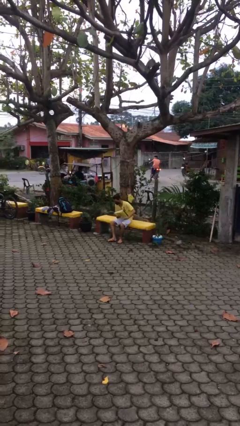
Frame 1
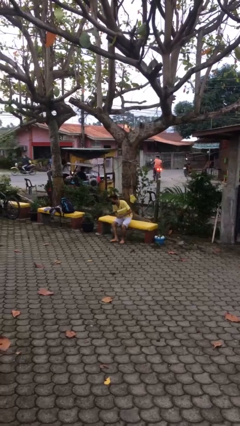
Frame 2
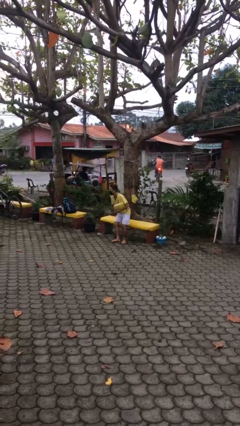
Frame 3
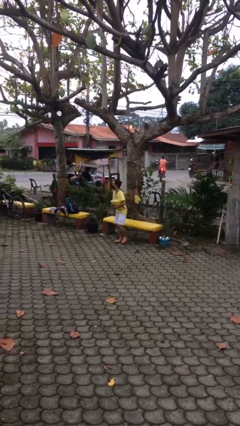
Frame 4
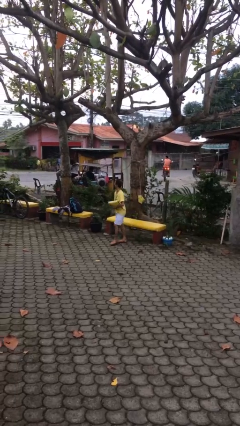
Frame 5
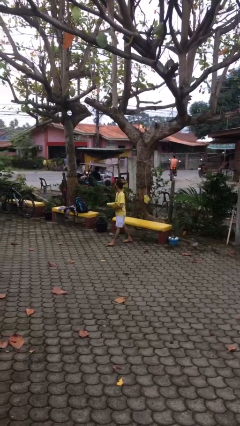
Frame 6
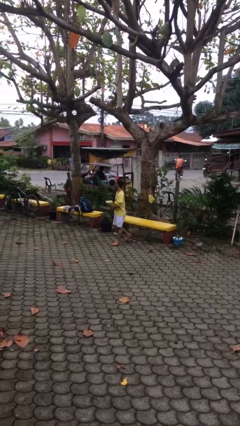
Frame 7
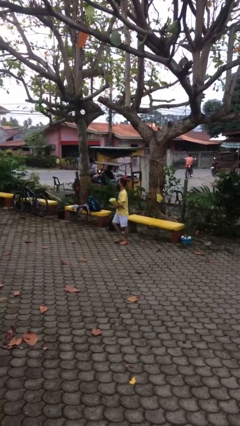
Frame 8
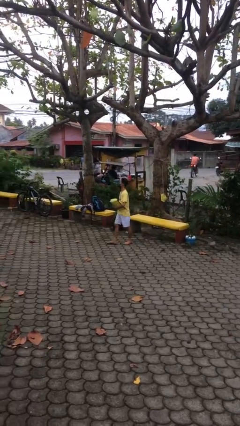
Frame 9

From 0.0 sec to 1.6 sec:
person stands up

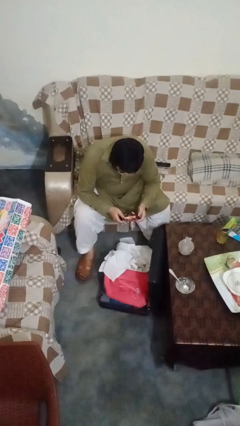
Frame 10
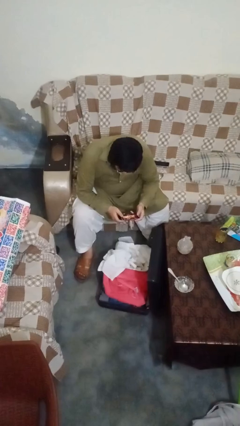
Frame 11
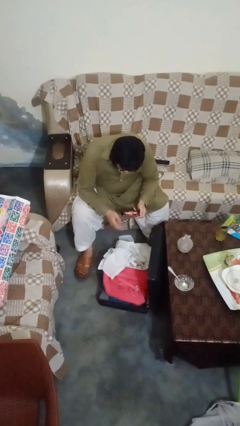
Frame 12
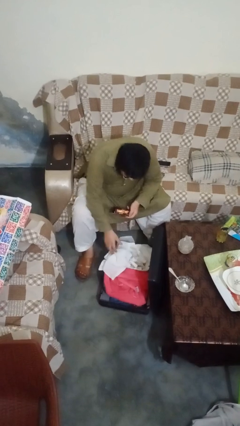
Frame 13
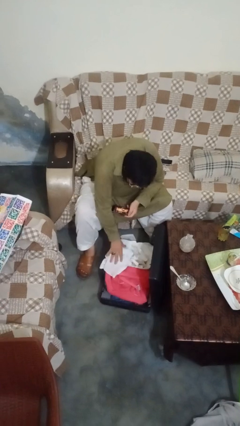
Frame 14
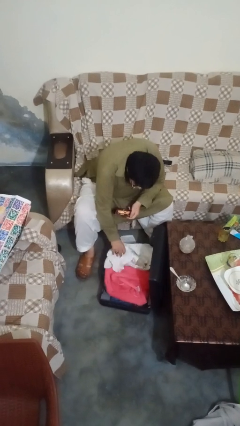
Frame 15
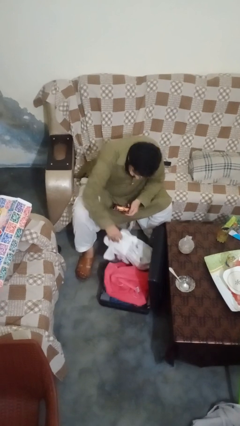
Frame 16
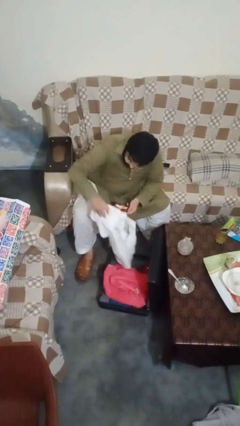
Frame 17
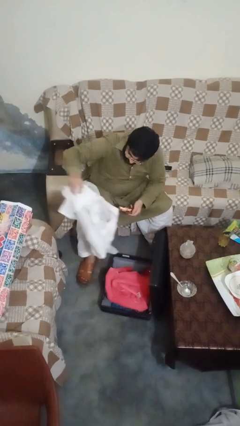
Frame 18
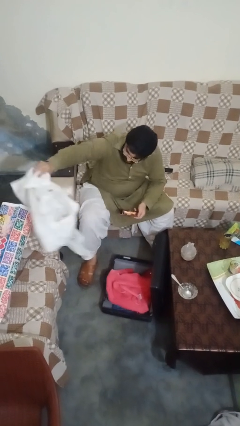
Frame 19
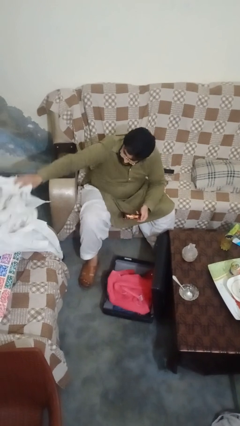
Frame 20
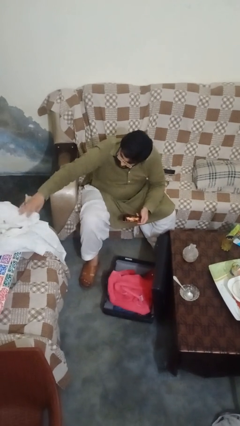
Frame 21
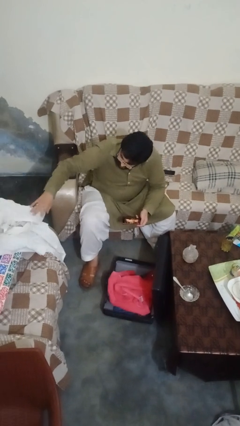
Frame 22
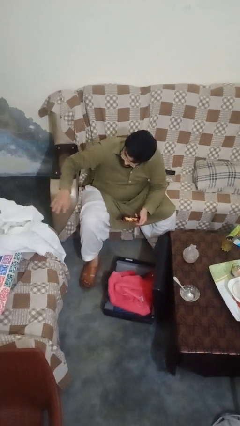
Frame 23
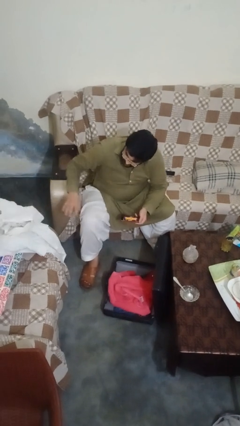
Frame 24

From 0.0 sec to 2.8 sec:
person unloads clothes from suitcase

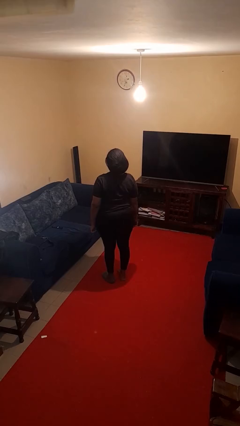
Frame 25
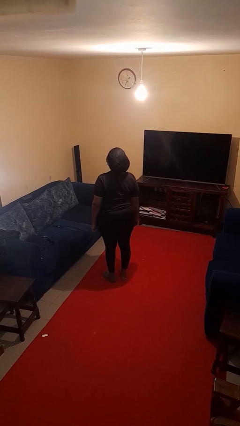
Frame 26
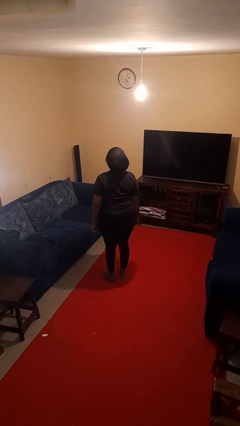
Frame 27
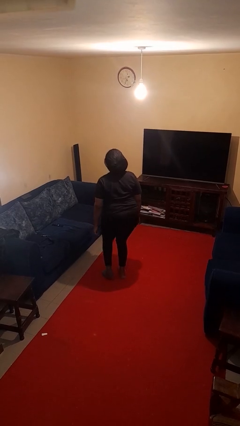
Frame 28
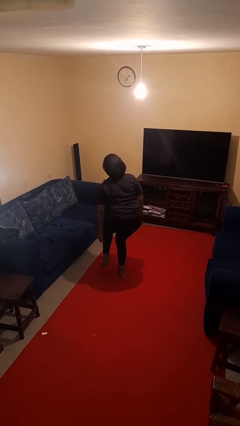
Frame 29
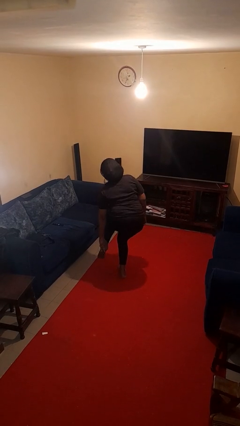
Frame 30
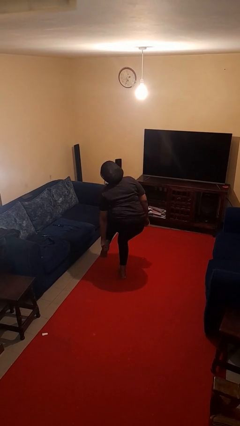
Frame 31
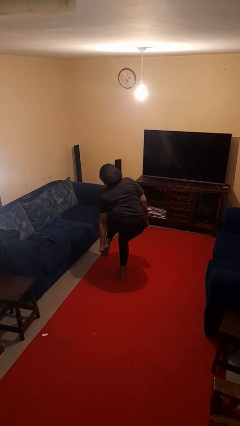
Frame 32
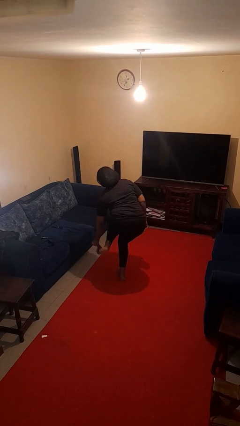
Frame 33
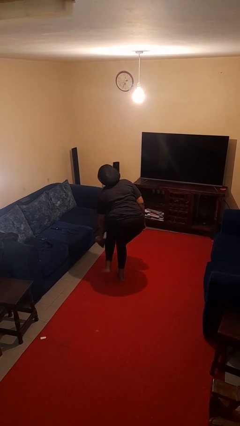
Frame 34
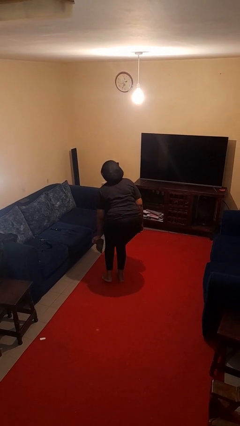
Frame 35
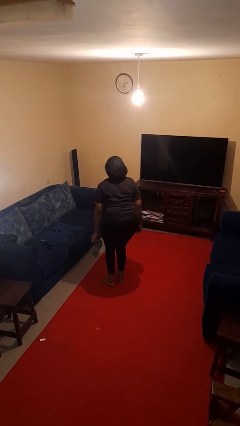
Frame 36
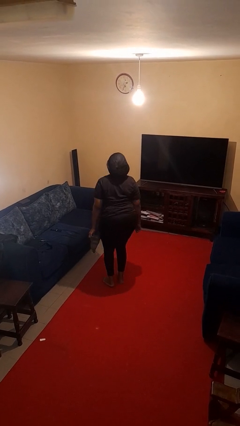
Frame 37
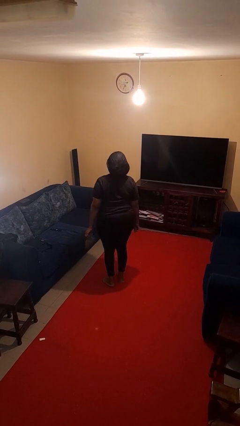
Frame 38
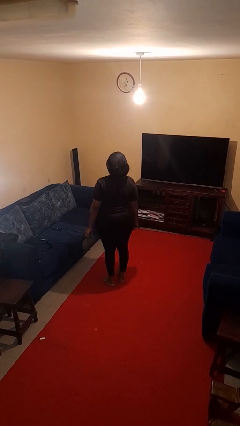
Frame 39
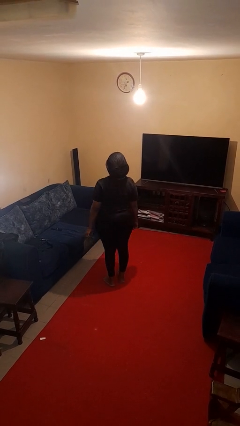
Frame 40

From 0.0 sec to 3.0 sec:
person takes off socks

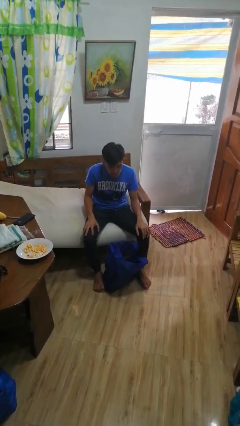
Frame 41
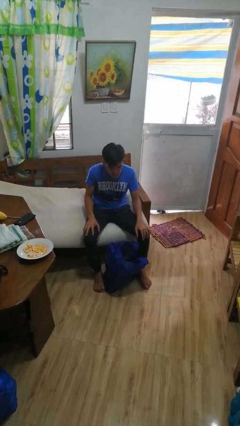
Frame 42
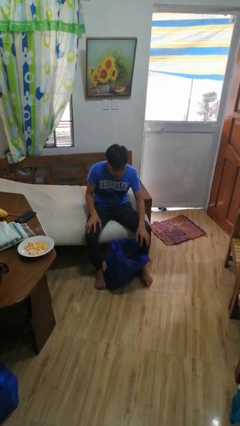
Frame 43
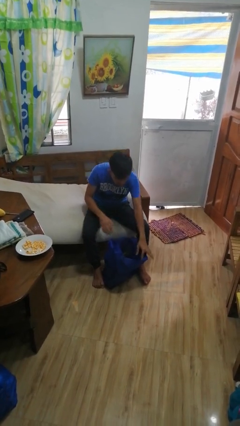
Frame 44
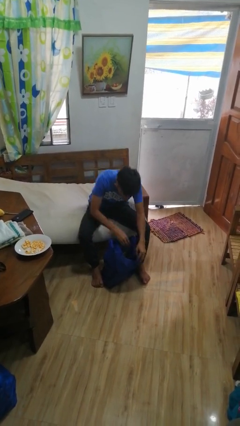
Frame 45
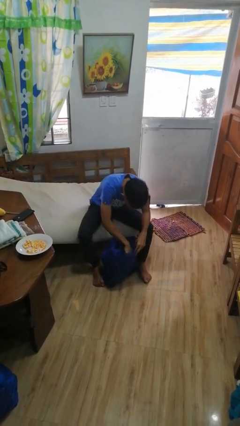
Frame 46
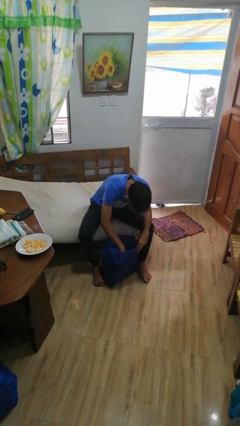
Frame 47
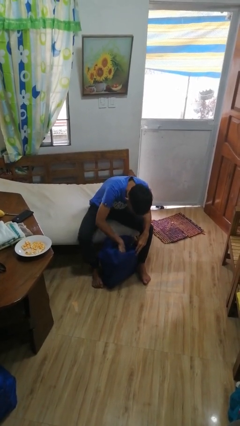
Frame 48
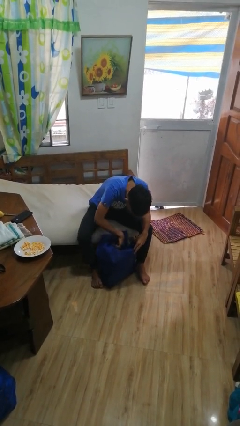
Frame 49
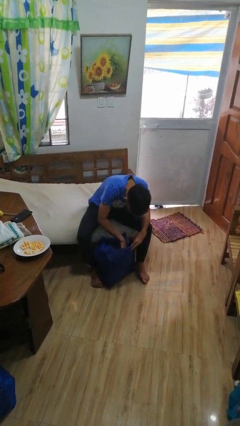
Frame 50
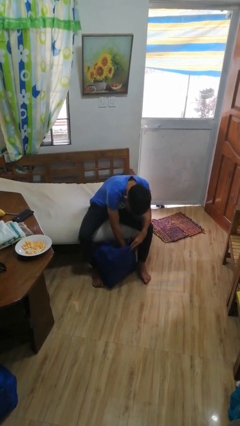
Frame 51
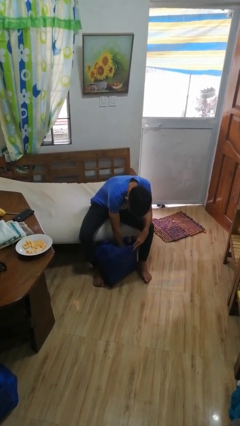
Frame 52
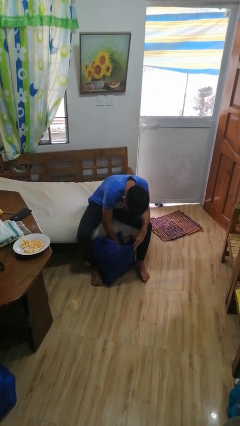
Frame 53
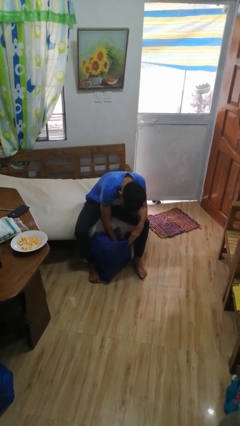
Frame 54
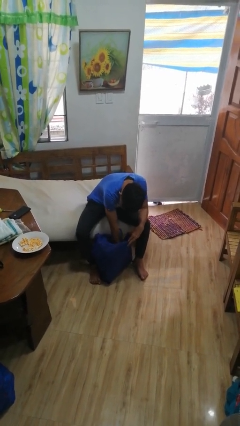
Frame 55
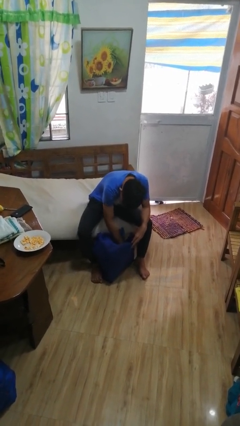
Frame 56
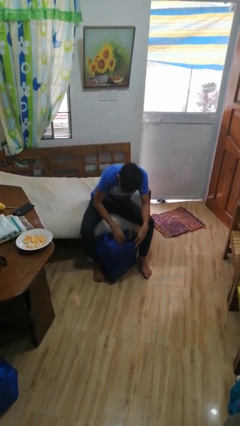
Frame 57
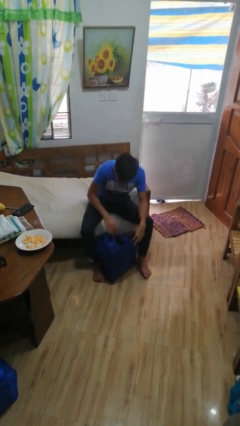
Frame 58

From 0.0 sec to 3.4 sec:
person searches in bag

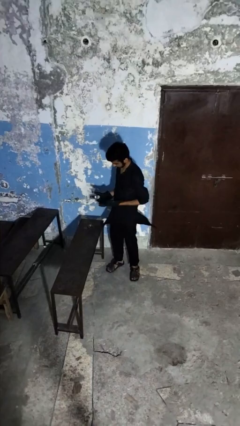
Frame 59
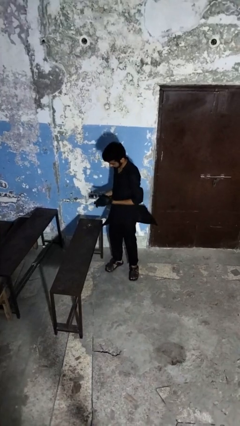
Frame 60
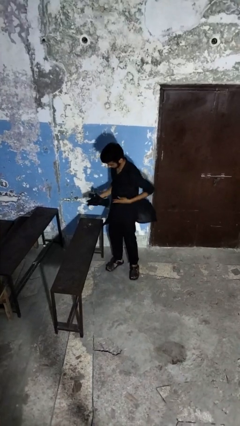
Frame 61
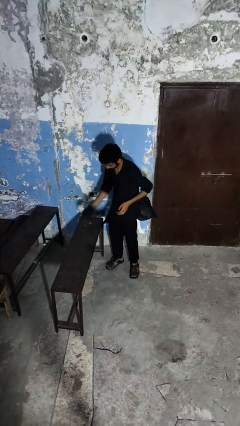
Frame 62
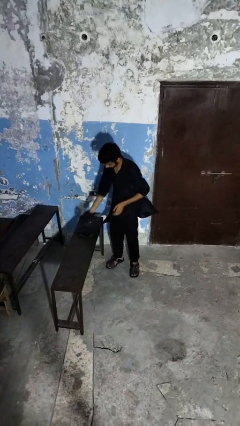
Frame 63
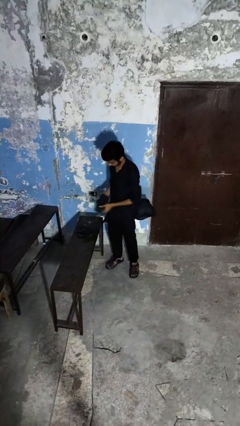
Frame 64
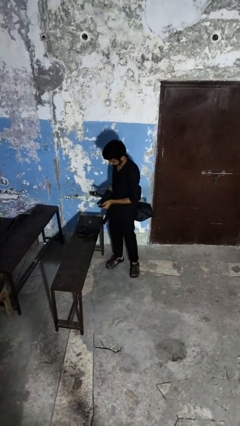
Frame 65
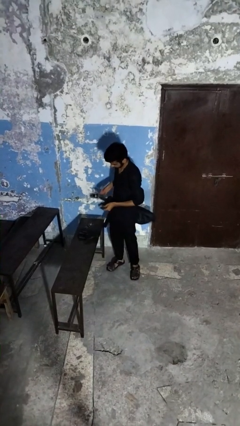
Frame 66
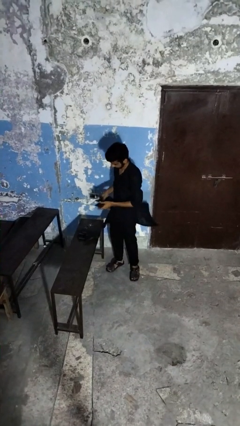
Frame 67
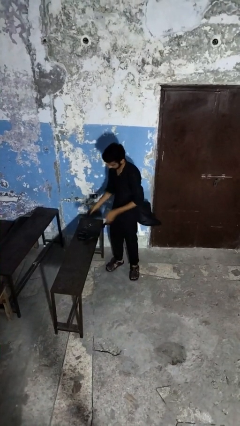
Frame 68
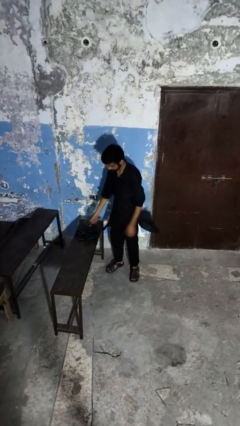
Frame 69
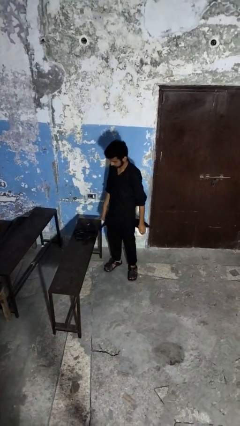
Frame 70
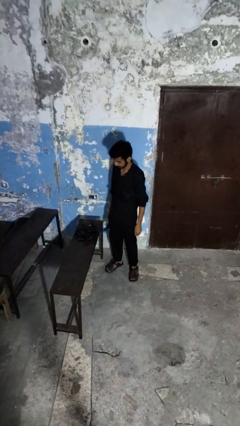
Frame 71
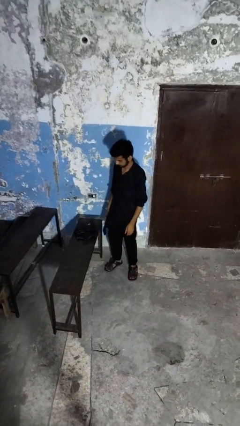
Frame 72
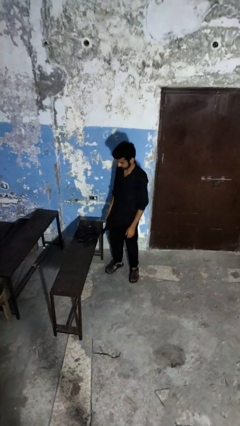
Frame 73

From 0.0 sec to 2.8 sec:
person takes off gloves

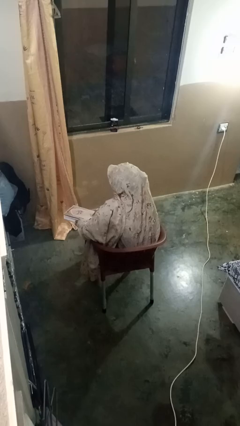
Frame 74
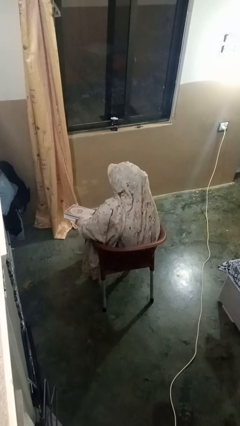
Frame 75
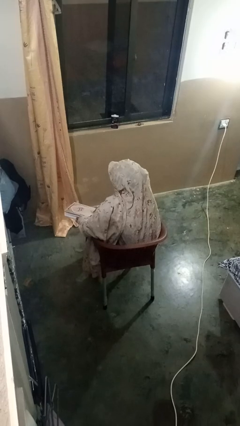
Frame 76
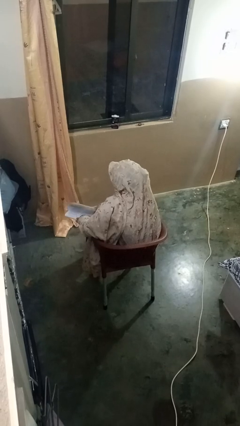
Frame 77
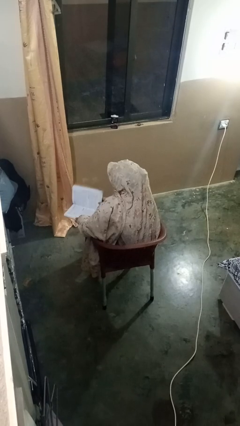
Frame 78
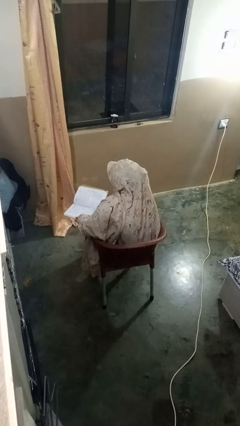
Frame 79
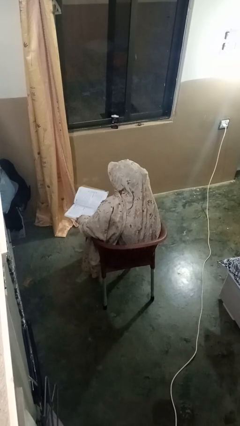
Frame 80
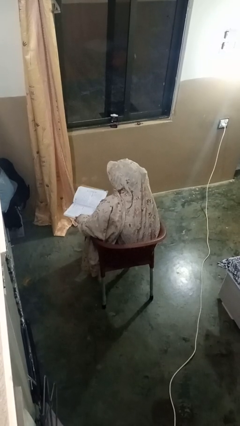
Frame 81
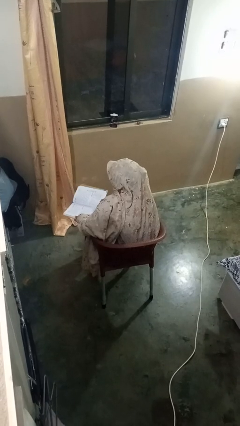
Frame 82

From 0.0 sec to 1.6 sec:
person reads book

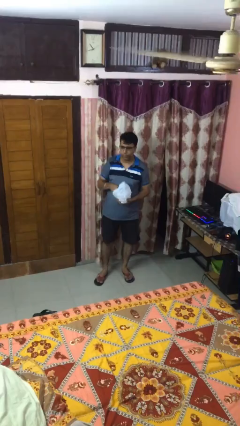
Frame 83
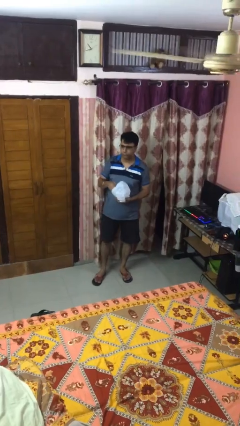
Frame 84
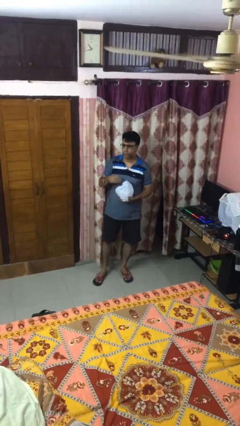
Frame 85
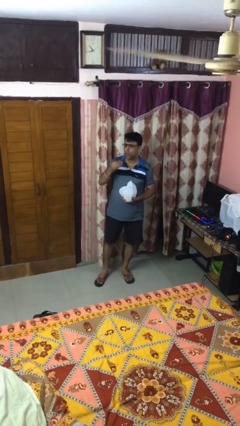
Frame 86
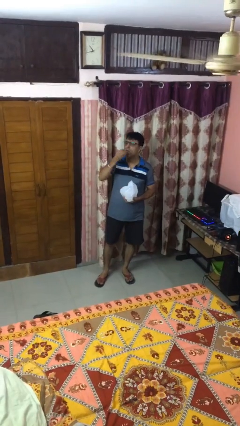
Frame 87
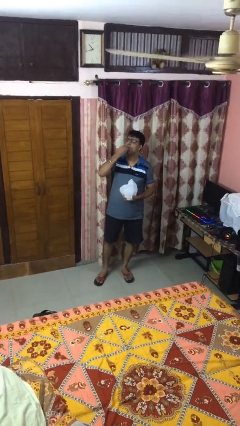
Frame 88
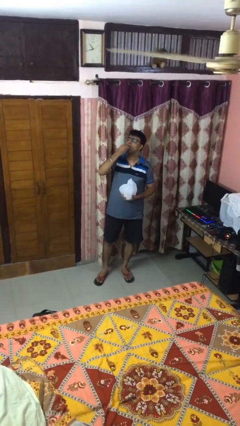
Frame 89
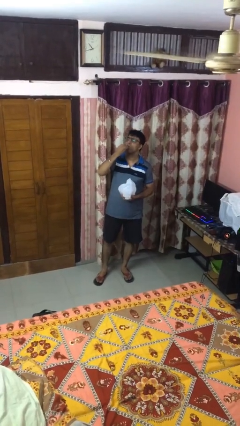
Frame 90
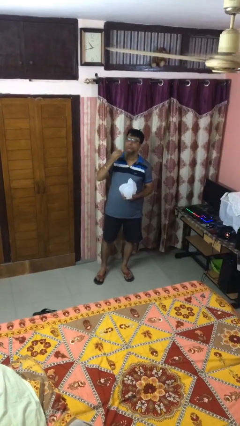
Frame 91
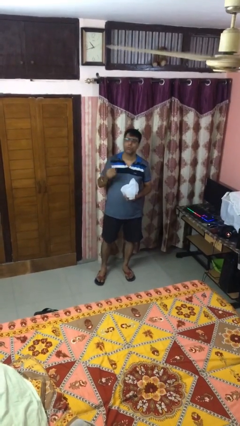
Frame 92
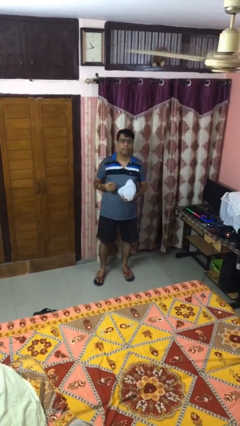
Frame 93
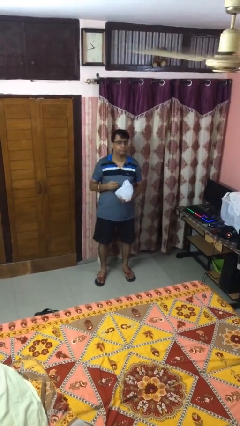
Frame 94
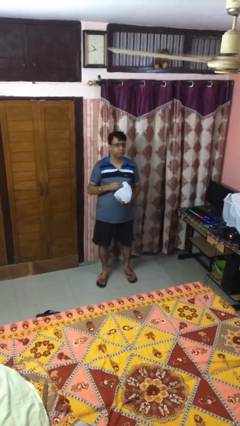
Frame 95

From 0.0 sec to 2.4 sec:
person eats snack from bag
